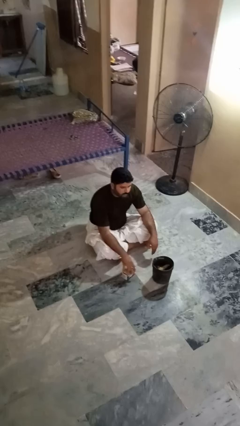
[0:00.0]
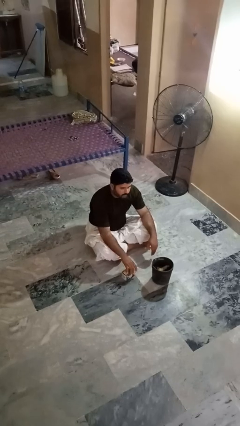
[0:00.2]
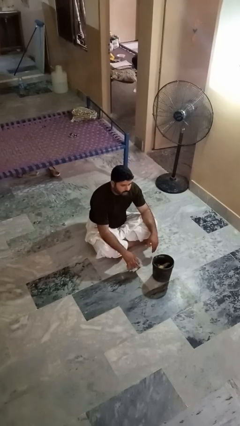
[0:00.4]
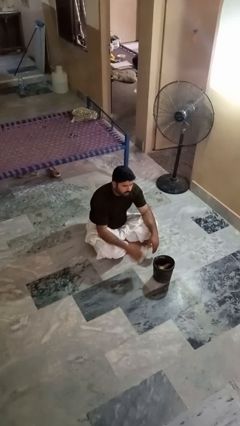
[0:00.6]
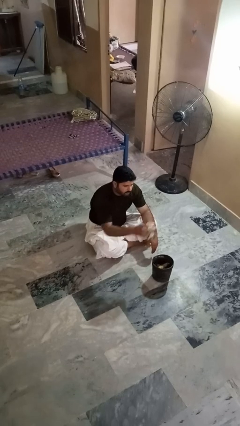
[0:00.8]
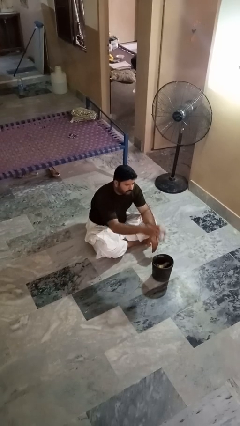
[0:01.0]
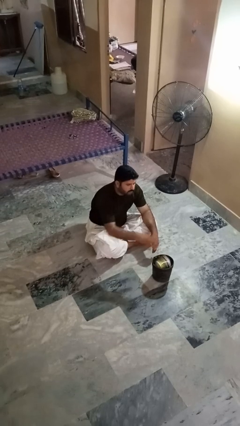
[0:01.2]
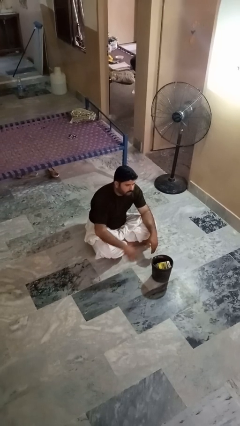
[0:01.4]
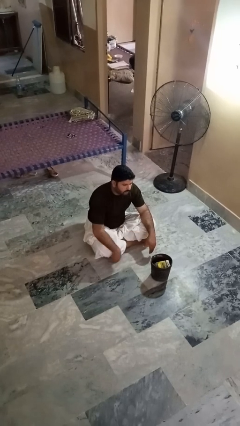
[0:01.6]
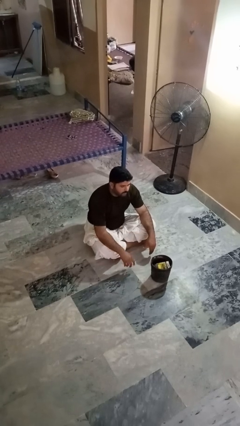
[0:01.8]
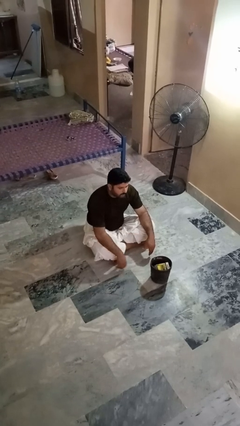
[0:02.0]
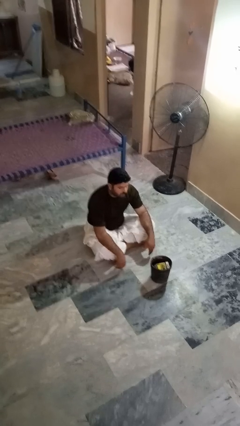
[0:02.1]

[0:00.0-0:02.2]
person puts object into basket

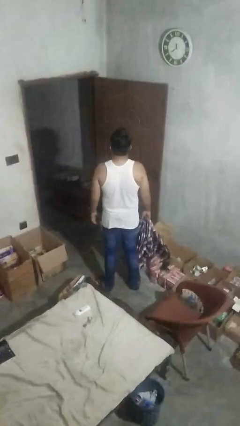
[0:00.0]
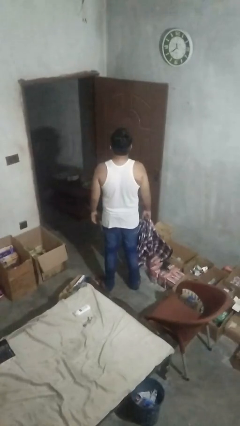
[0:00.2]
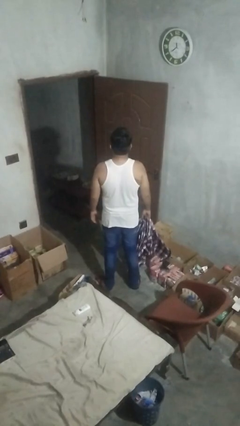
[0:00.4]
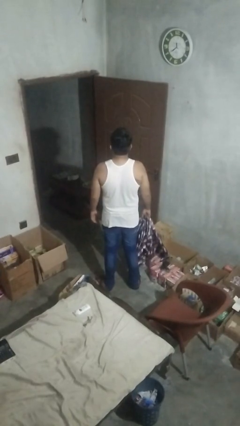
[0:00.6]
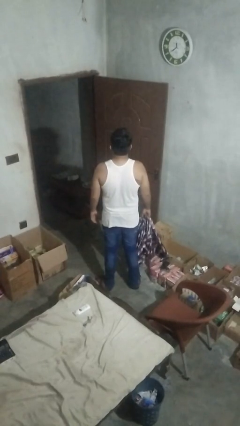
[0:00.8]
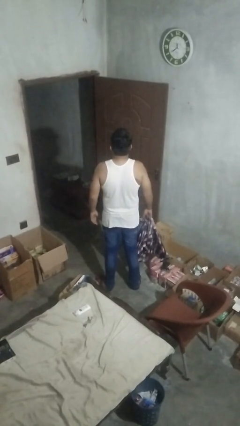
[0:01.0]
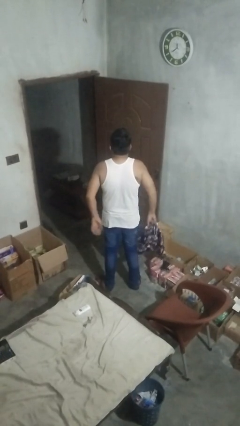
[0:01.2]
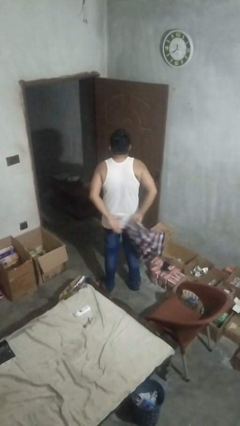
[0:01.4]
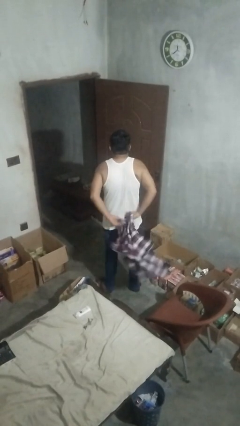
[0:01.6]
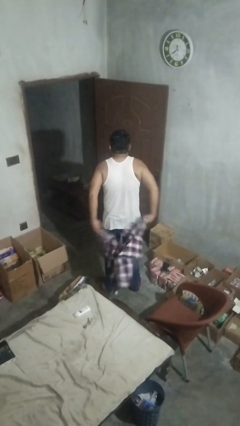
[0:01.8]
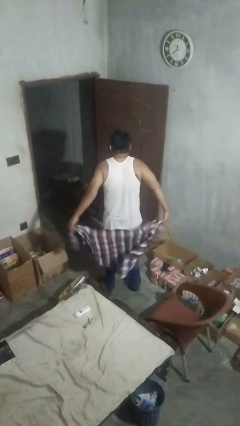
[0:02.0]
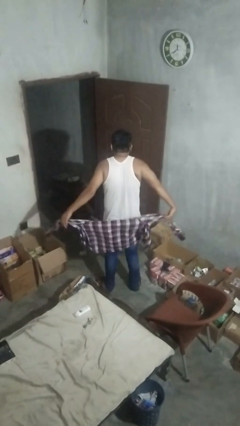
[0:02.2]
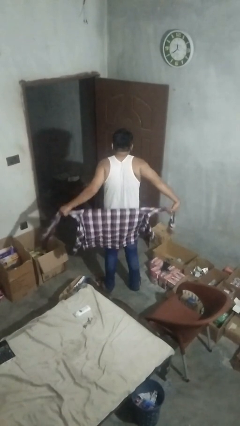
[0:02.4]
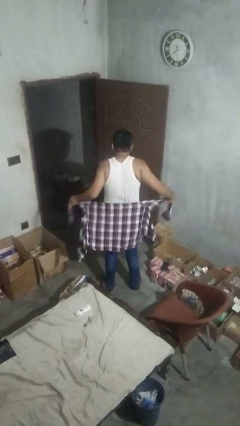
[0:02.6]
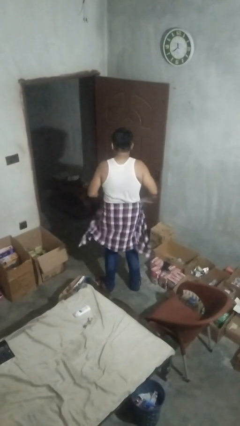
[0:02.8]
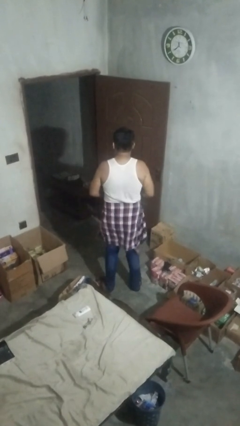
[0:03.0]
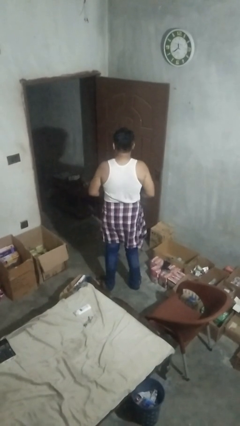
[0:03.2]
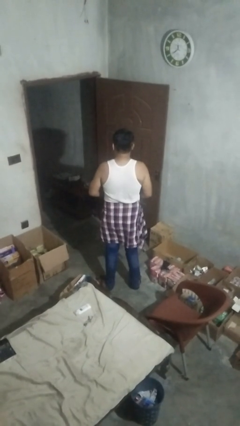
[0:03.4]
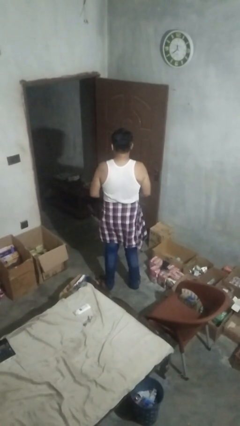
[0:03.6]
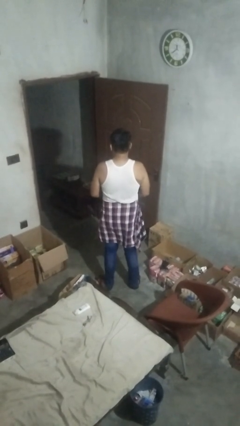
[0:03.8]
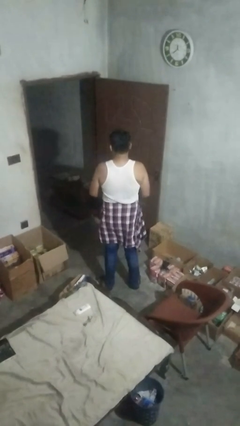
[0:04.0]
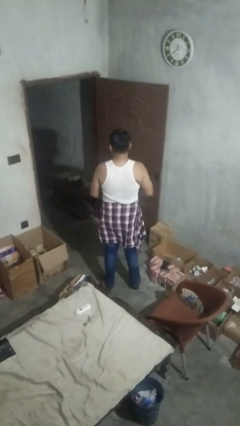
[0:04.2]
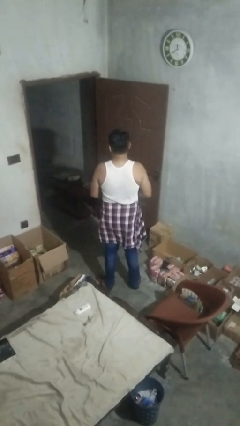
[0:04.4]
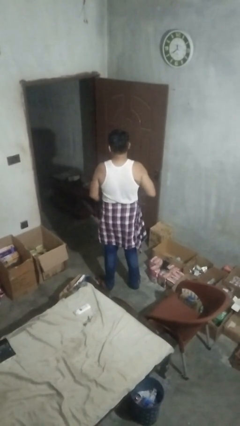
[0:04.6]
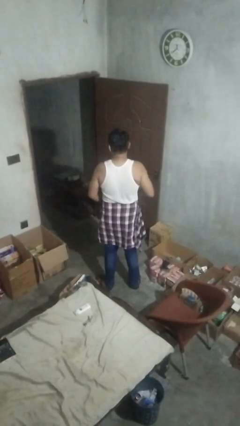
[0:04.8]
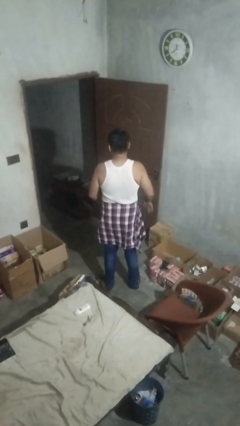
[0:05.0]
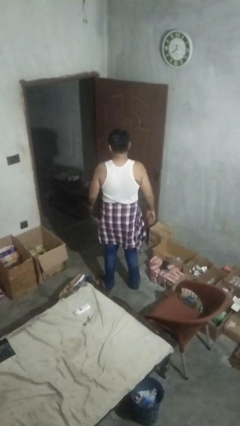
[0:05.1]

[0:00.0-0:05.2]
person ties jacket around waist

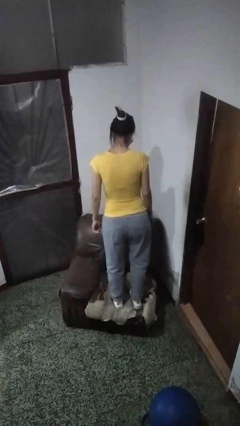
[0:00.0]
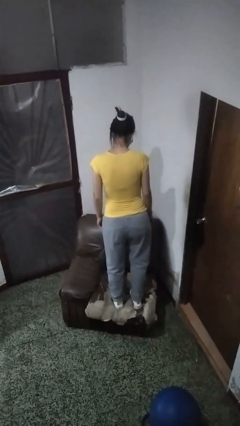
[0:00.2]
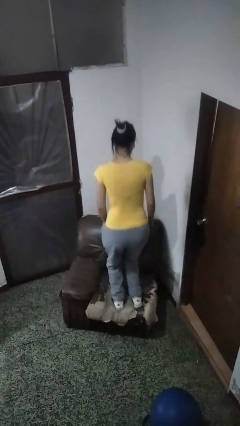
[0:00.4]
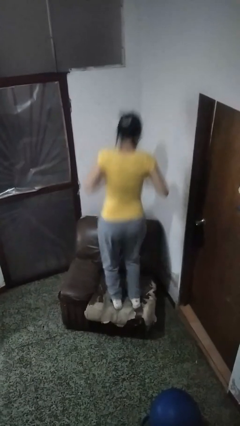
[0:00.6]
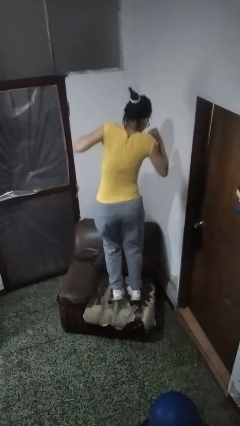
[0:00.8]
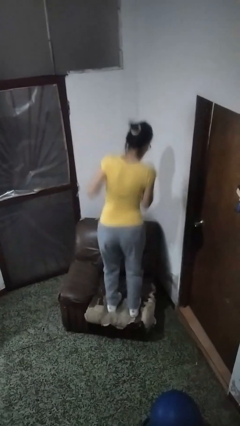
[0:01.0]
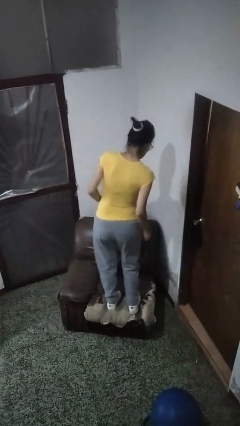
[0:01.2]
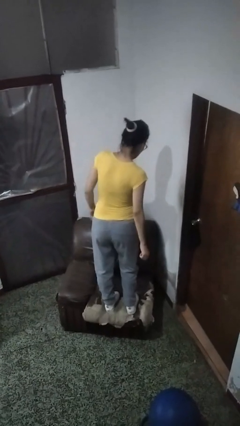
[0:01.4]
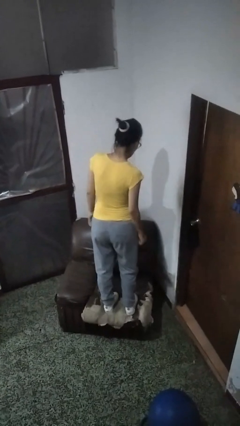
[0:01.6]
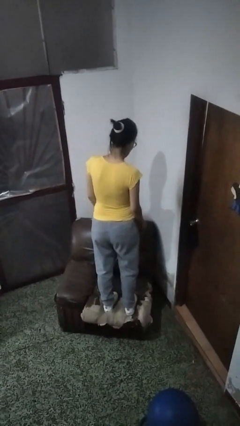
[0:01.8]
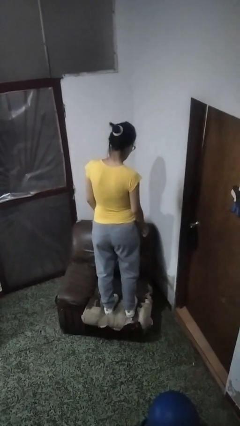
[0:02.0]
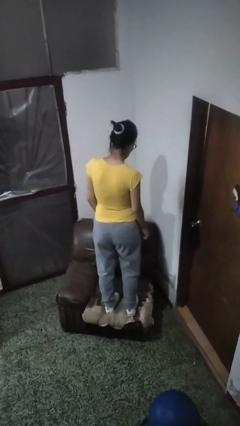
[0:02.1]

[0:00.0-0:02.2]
person jumps on couch

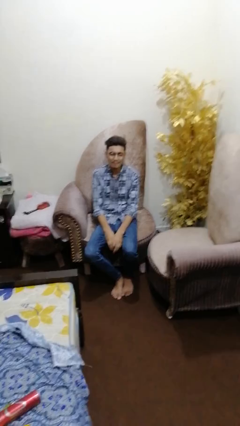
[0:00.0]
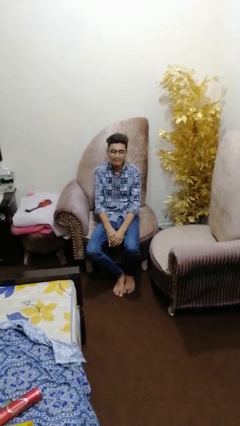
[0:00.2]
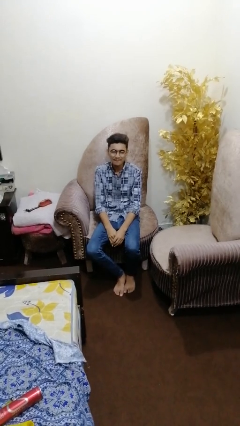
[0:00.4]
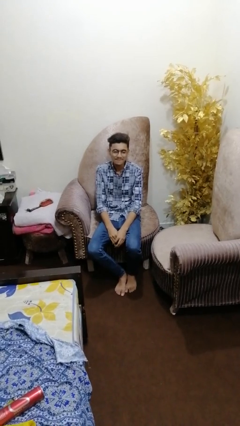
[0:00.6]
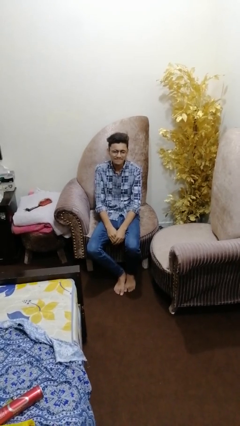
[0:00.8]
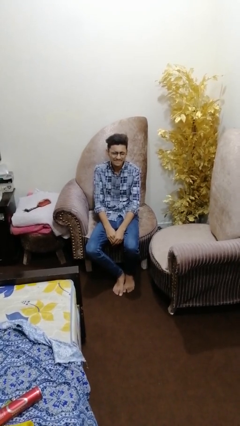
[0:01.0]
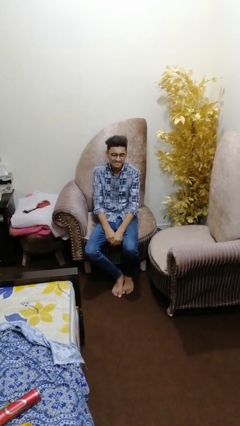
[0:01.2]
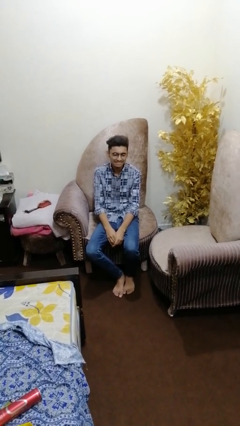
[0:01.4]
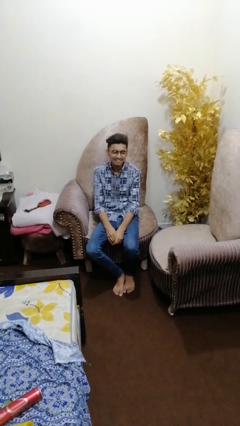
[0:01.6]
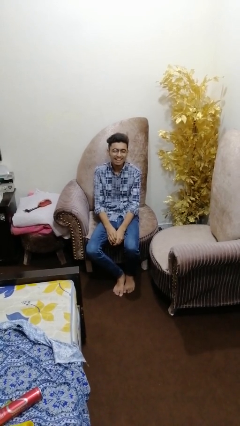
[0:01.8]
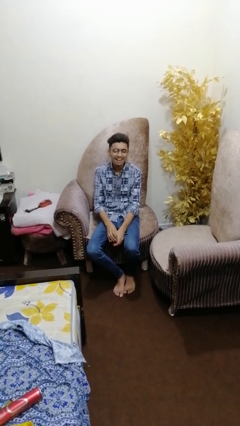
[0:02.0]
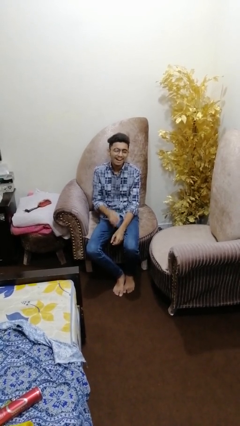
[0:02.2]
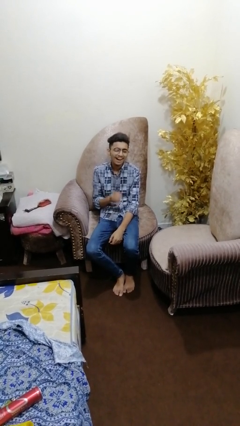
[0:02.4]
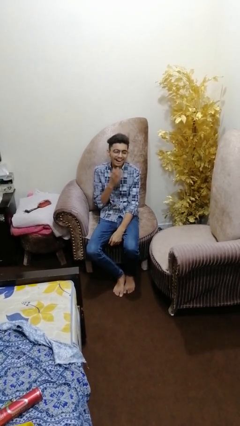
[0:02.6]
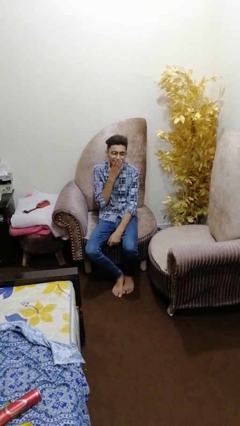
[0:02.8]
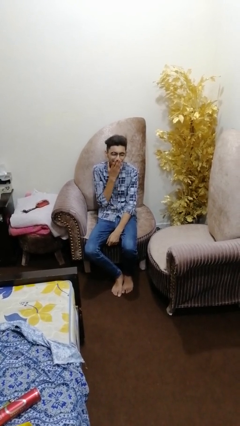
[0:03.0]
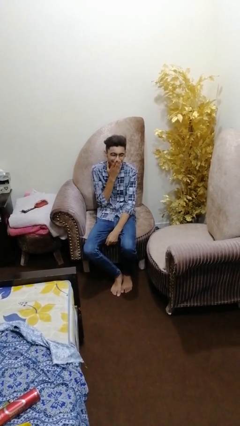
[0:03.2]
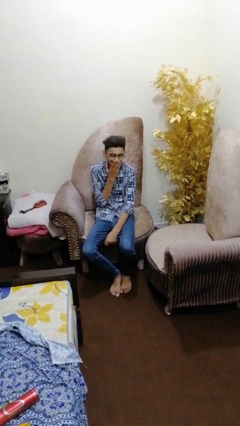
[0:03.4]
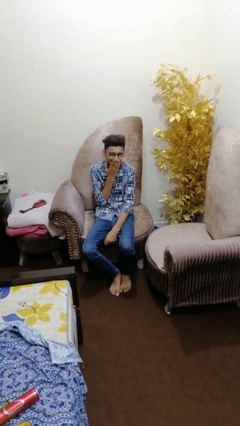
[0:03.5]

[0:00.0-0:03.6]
person yawns

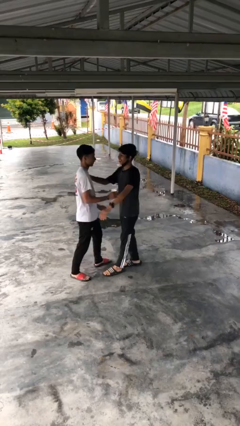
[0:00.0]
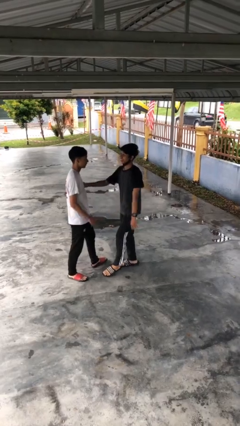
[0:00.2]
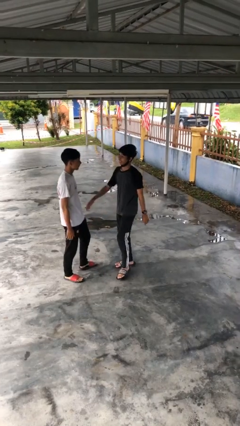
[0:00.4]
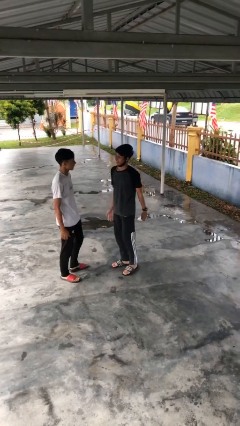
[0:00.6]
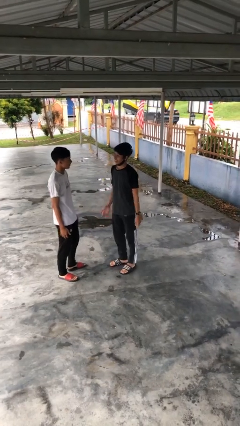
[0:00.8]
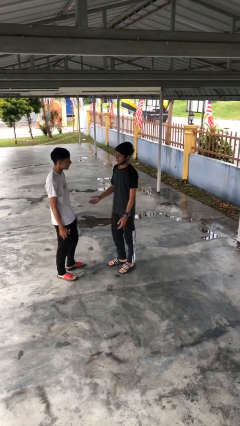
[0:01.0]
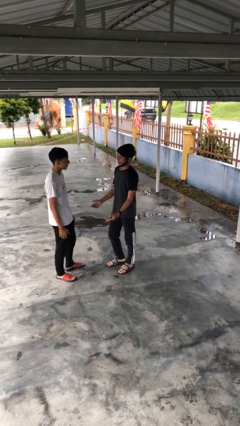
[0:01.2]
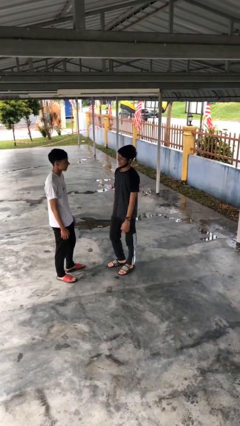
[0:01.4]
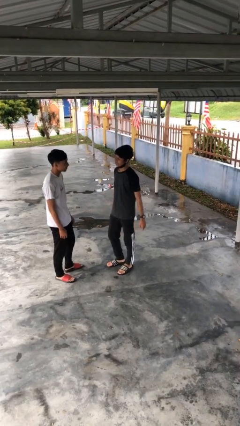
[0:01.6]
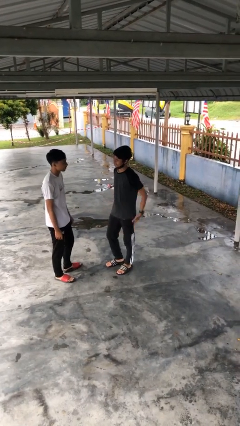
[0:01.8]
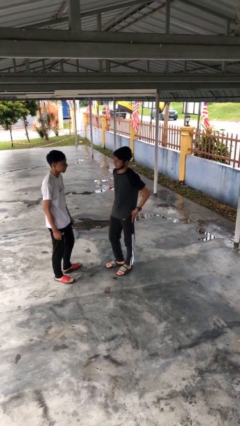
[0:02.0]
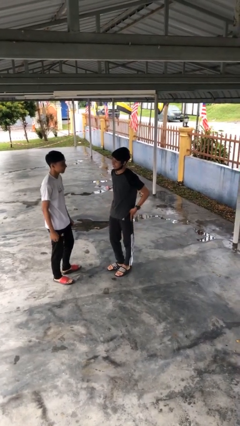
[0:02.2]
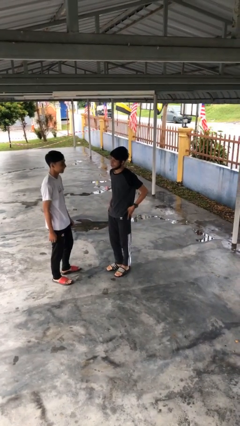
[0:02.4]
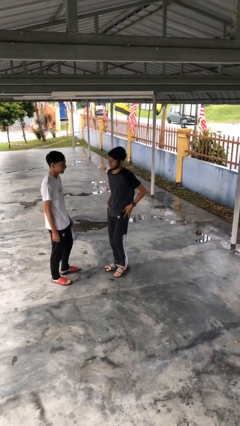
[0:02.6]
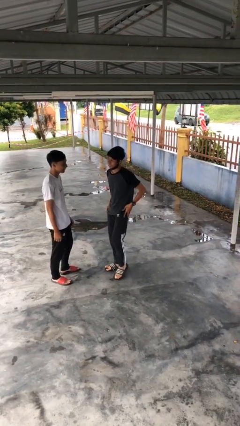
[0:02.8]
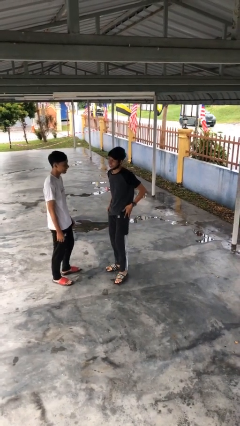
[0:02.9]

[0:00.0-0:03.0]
person talks to person

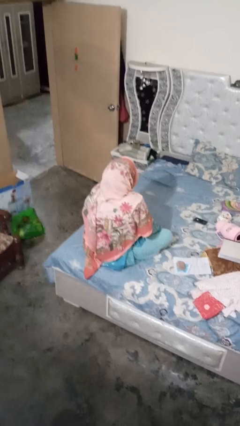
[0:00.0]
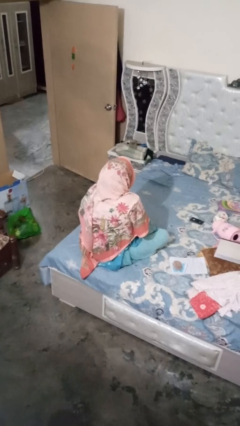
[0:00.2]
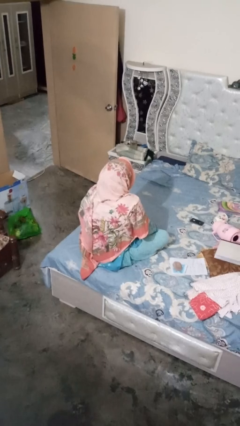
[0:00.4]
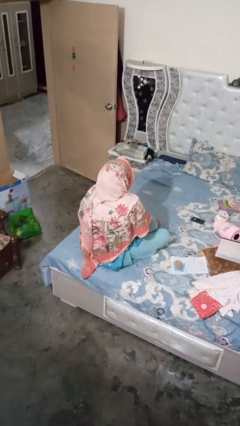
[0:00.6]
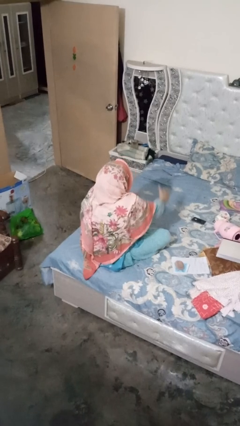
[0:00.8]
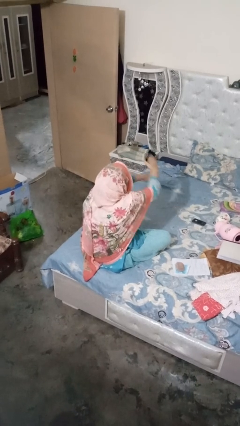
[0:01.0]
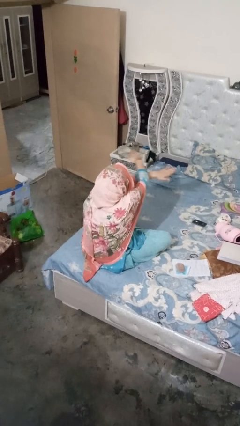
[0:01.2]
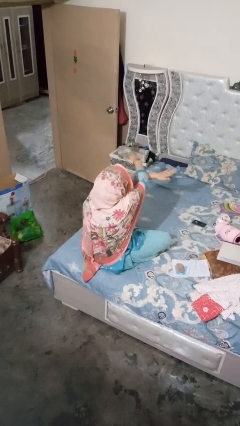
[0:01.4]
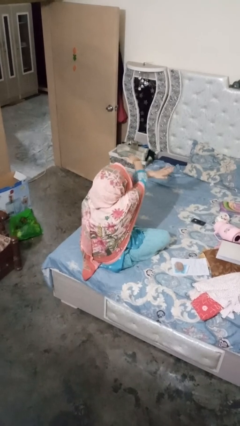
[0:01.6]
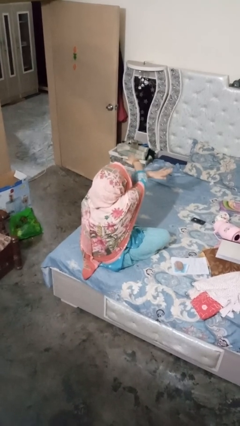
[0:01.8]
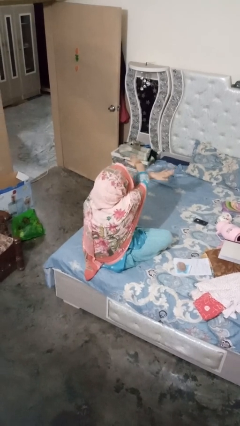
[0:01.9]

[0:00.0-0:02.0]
person gestures arms x
